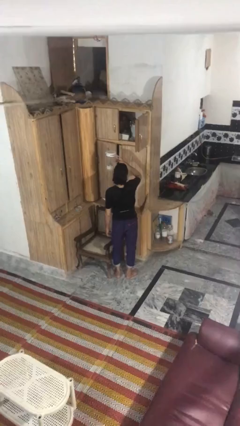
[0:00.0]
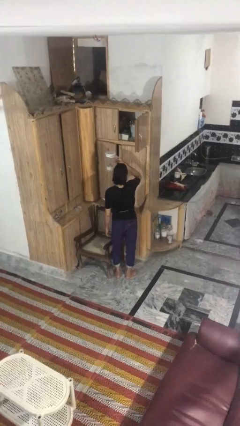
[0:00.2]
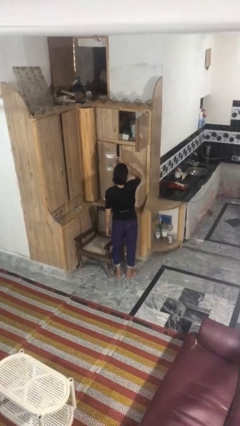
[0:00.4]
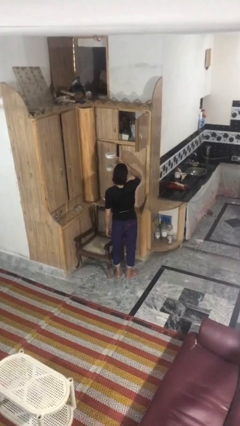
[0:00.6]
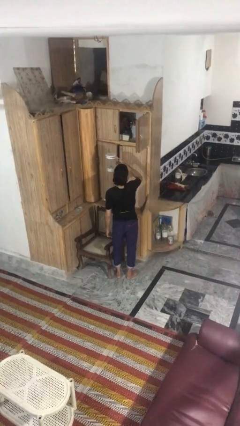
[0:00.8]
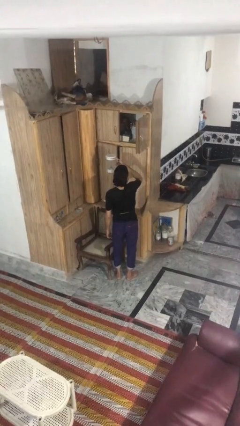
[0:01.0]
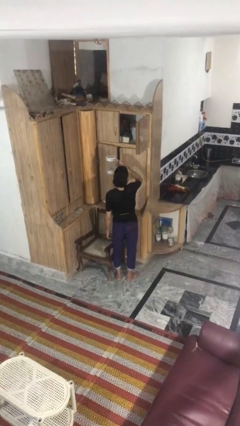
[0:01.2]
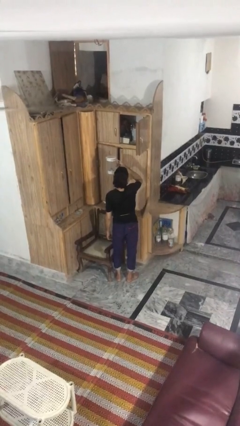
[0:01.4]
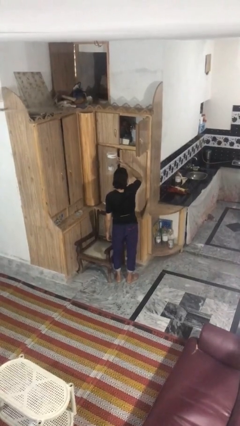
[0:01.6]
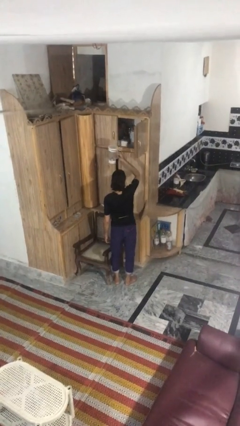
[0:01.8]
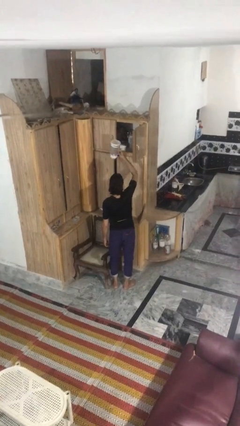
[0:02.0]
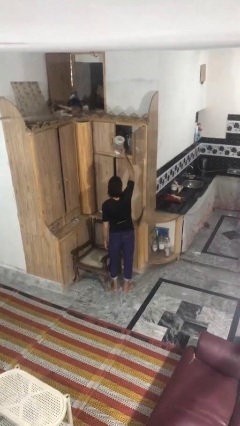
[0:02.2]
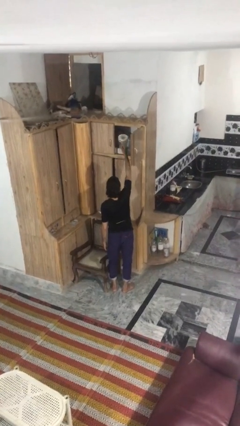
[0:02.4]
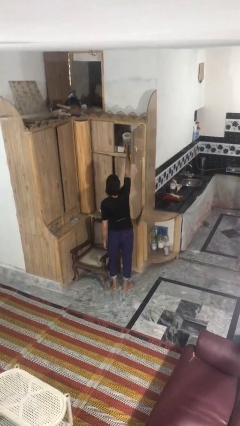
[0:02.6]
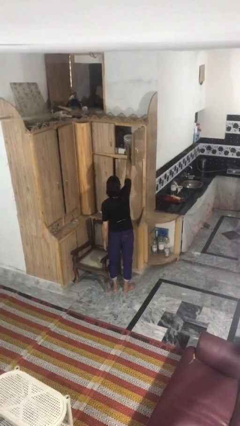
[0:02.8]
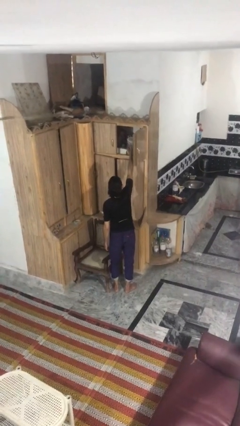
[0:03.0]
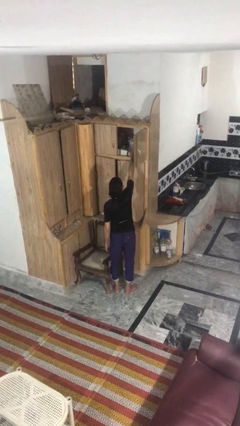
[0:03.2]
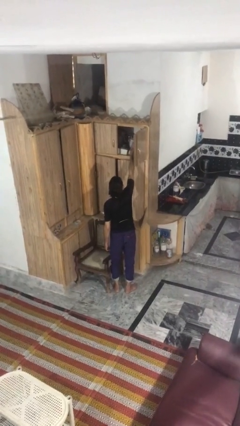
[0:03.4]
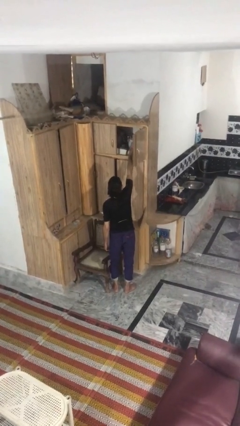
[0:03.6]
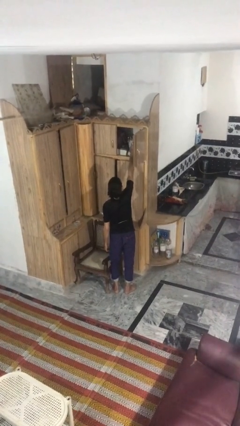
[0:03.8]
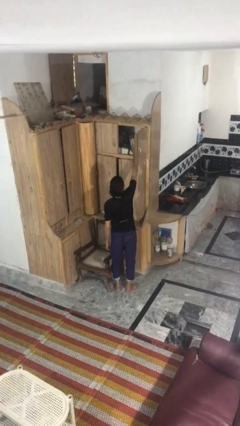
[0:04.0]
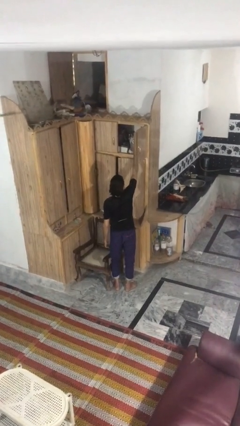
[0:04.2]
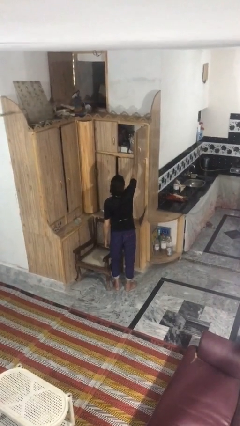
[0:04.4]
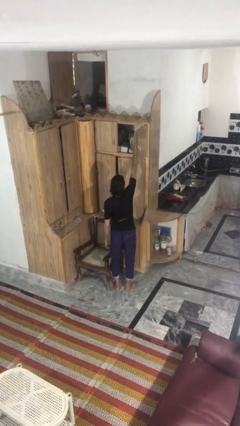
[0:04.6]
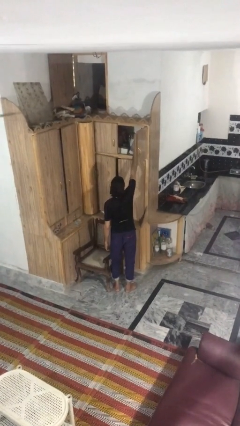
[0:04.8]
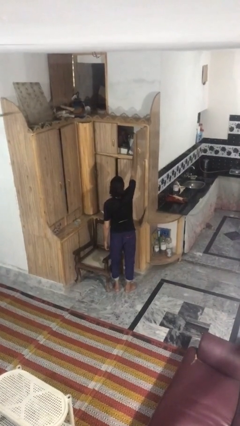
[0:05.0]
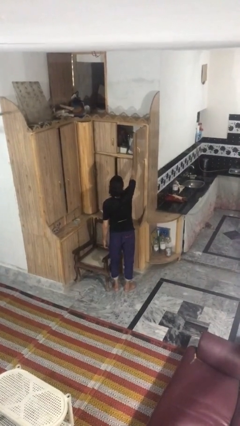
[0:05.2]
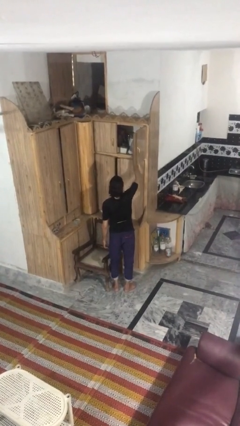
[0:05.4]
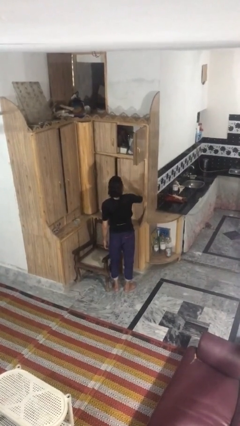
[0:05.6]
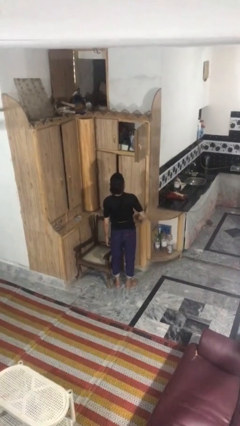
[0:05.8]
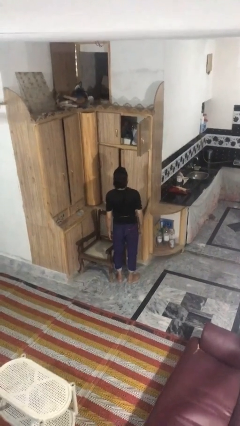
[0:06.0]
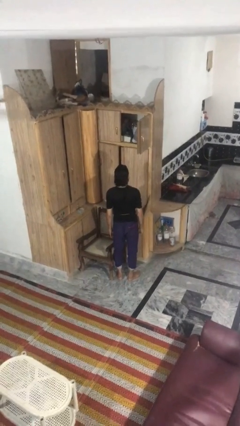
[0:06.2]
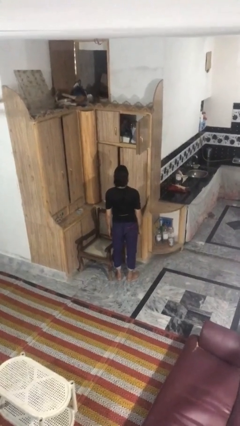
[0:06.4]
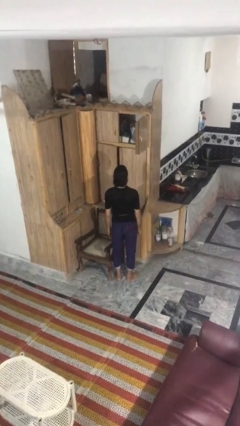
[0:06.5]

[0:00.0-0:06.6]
person puts down object on shelf

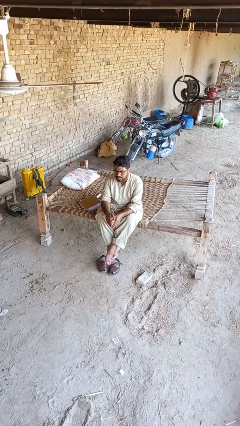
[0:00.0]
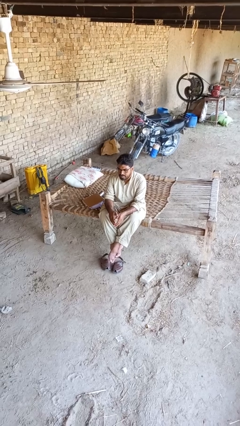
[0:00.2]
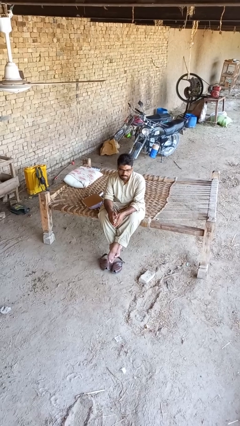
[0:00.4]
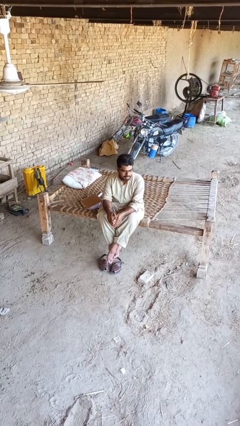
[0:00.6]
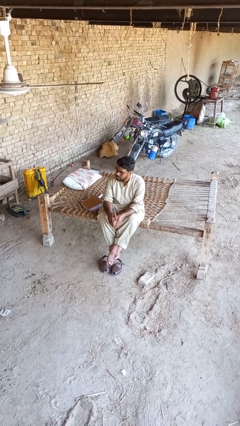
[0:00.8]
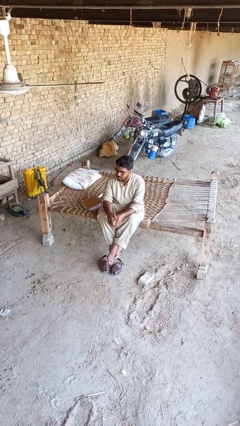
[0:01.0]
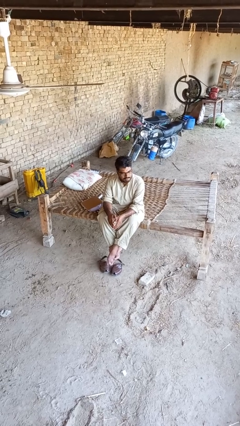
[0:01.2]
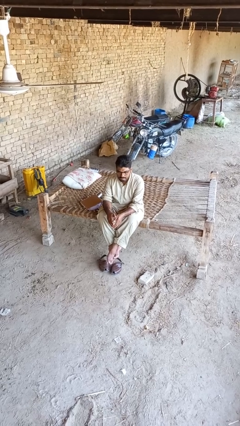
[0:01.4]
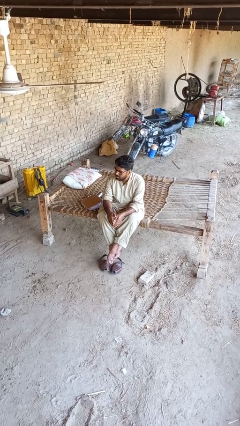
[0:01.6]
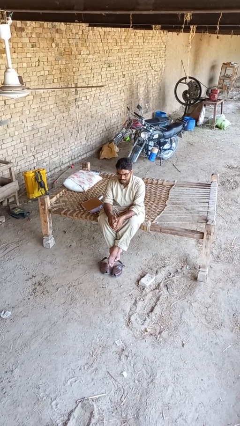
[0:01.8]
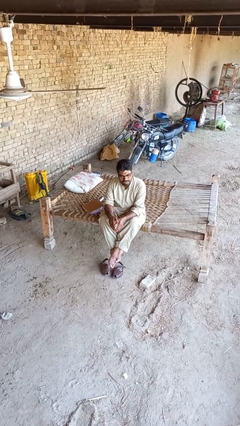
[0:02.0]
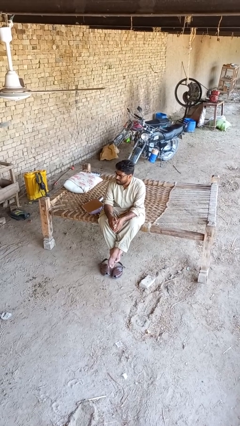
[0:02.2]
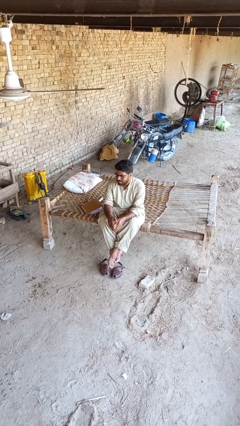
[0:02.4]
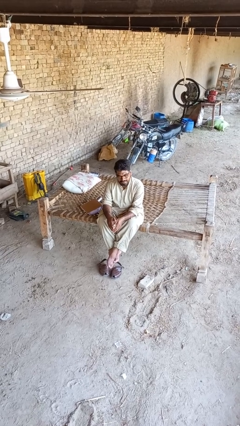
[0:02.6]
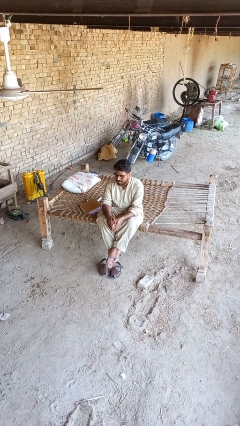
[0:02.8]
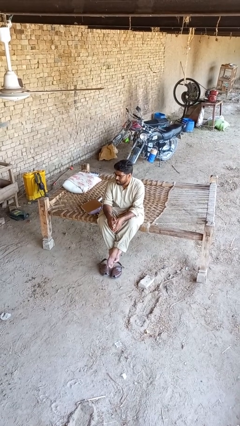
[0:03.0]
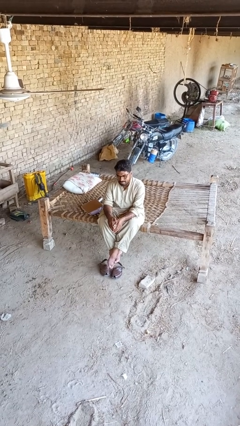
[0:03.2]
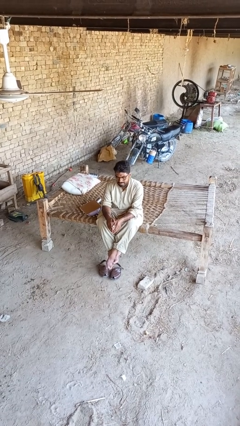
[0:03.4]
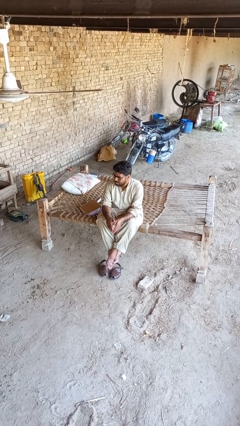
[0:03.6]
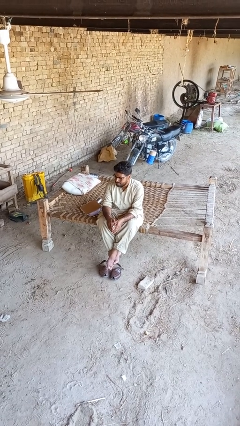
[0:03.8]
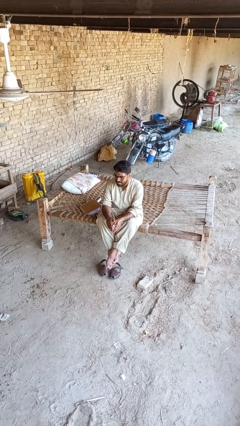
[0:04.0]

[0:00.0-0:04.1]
person shakes head

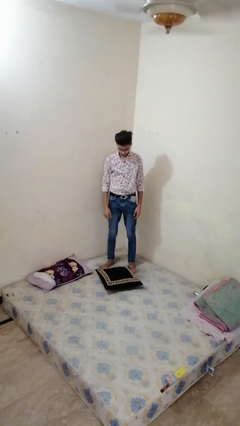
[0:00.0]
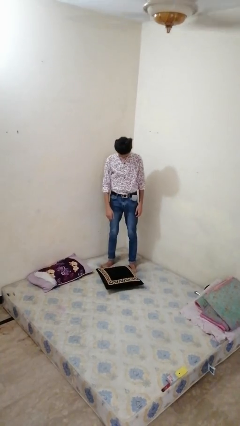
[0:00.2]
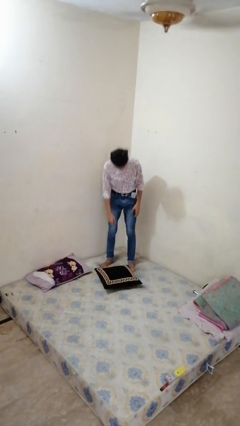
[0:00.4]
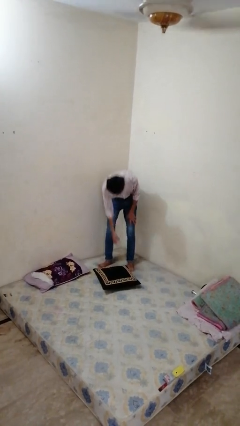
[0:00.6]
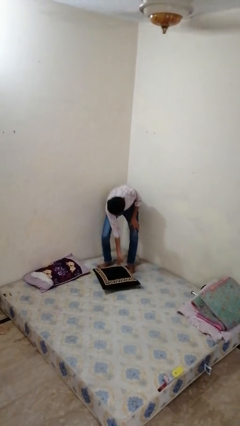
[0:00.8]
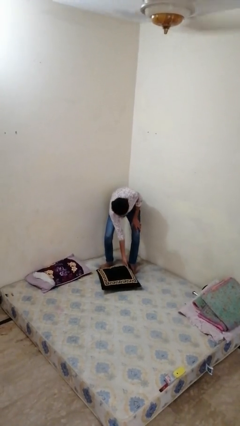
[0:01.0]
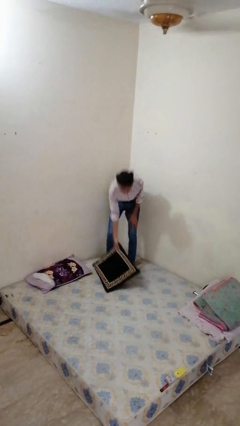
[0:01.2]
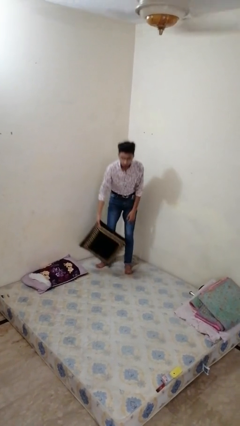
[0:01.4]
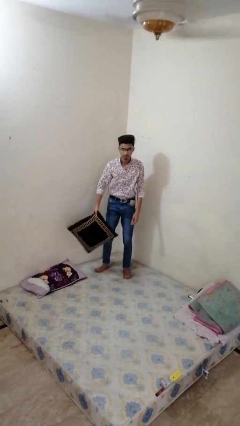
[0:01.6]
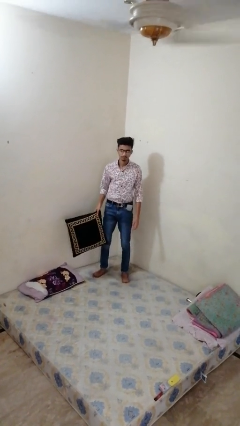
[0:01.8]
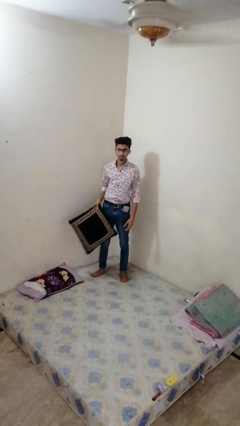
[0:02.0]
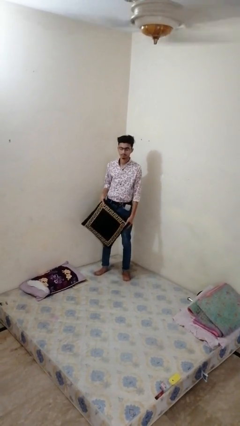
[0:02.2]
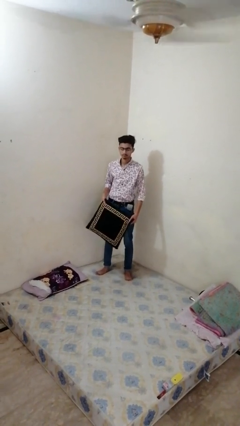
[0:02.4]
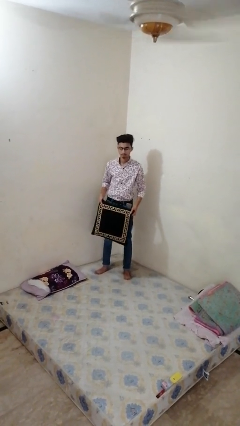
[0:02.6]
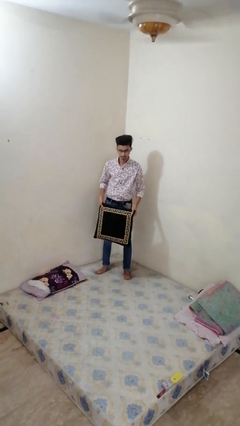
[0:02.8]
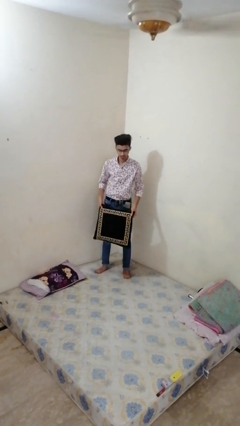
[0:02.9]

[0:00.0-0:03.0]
person picks up object from bed

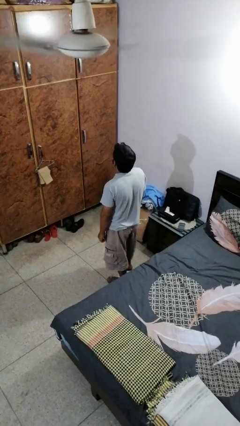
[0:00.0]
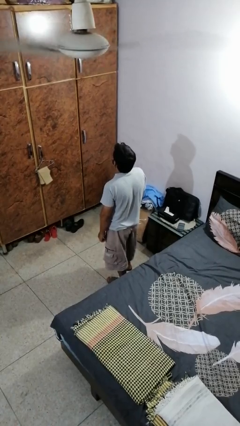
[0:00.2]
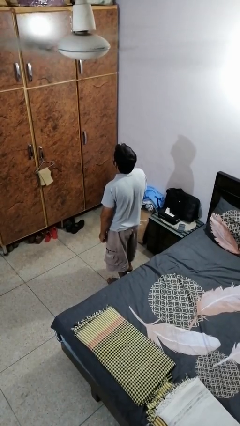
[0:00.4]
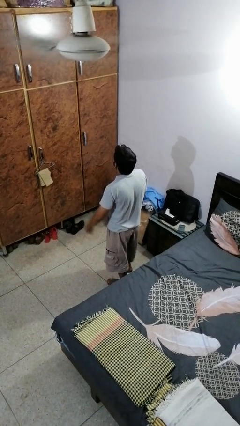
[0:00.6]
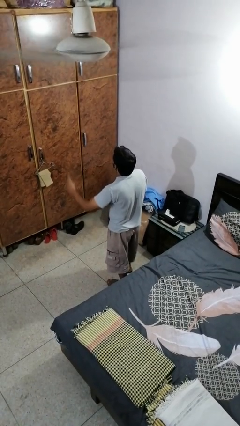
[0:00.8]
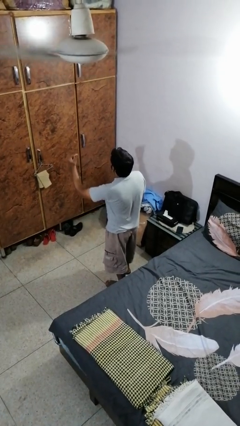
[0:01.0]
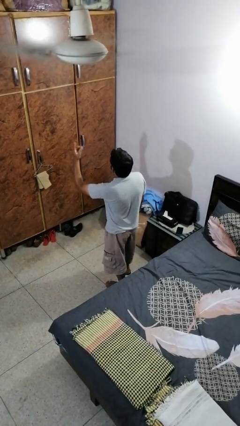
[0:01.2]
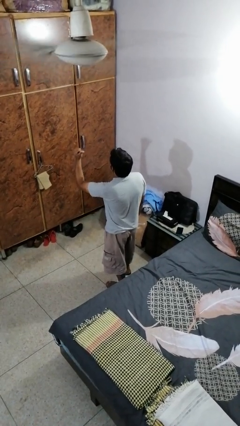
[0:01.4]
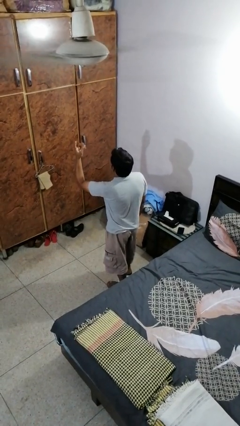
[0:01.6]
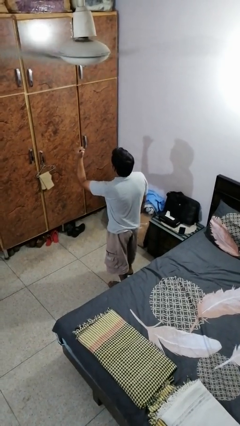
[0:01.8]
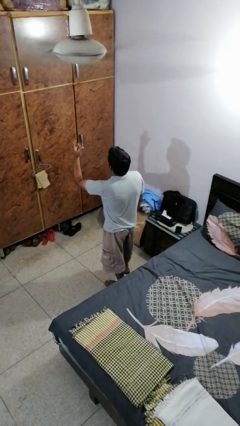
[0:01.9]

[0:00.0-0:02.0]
person snaps fingers

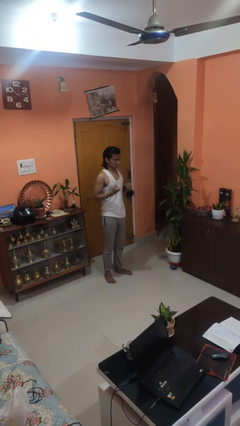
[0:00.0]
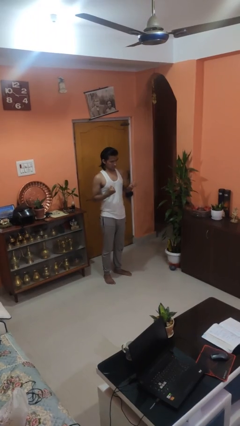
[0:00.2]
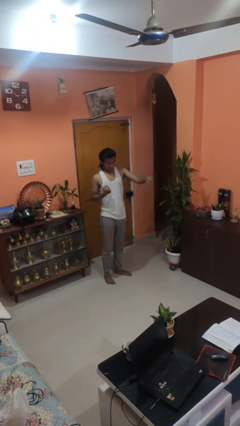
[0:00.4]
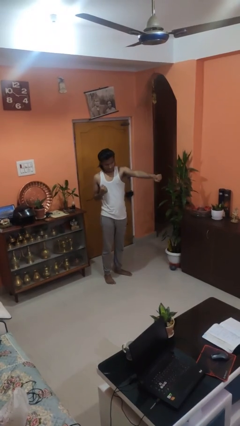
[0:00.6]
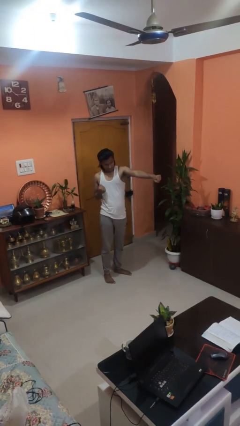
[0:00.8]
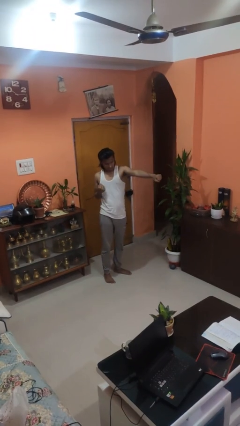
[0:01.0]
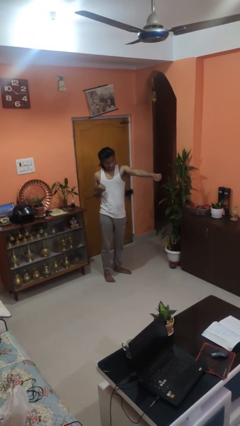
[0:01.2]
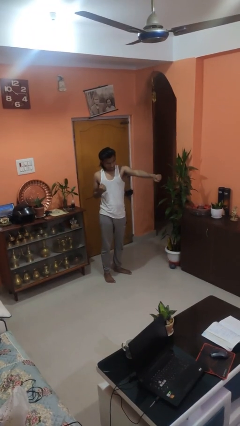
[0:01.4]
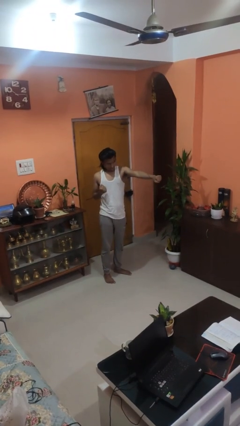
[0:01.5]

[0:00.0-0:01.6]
person punches

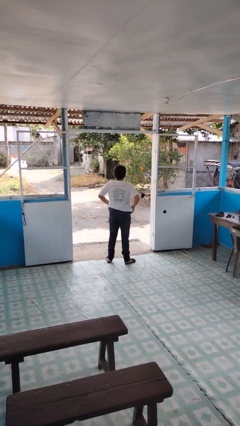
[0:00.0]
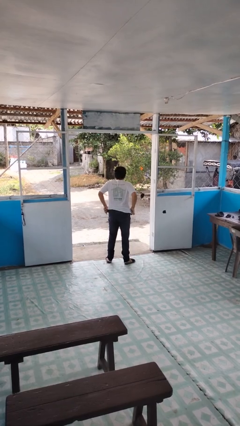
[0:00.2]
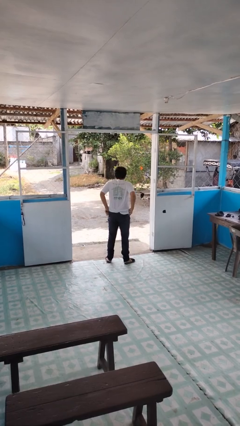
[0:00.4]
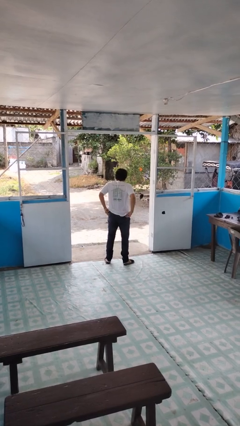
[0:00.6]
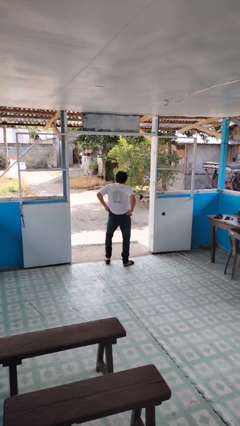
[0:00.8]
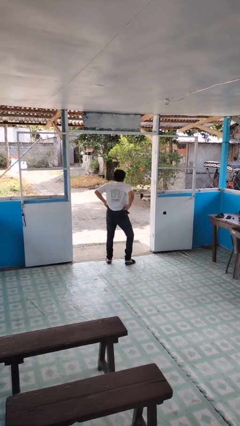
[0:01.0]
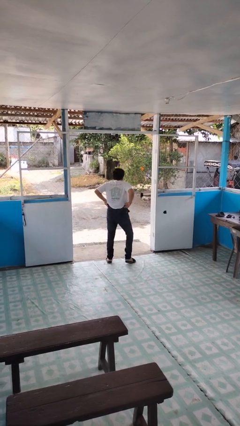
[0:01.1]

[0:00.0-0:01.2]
person hikes up pants
